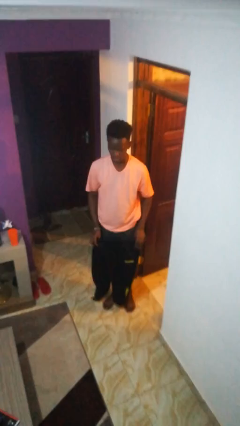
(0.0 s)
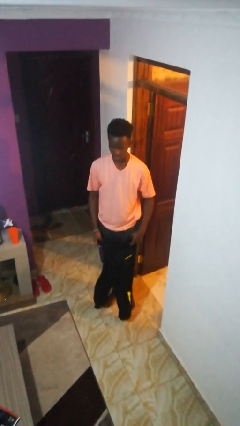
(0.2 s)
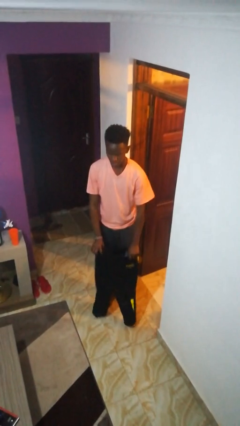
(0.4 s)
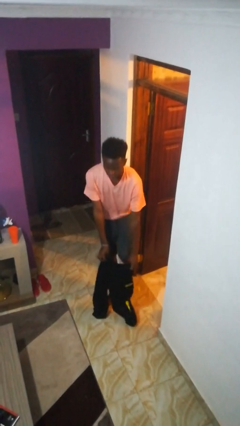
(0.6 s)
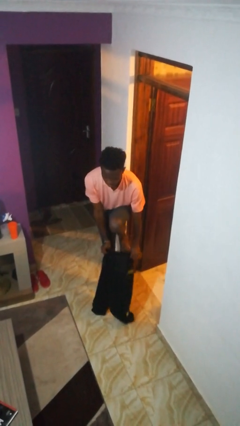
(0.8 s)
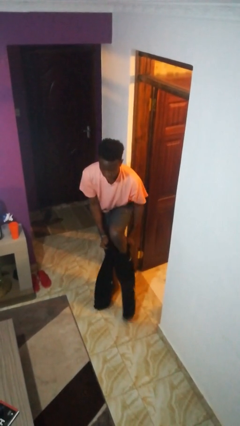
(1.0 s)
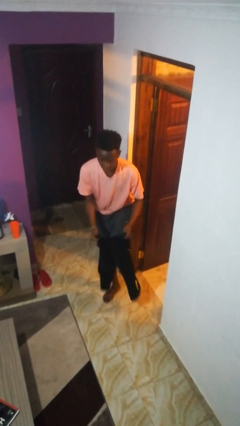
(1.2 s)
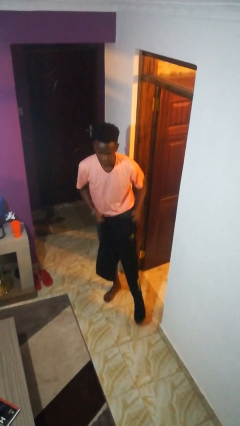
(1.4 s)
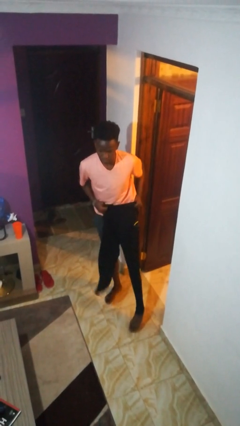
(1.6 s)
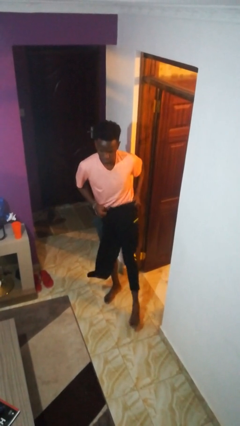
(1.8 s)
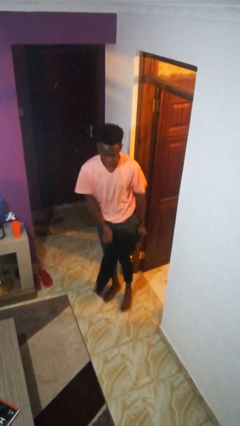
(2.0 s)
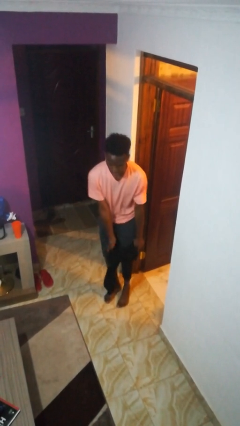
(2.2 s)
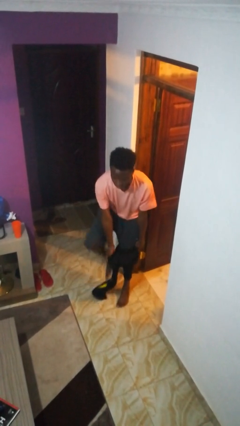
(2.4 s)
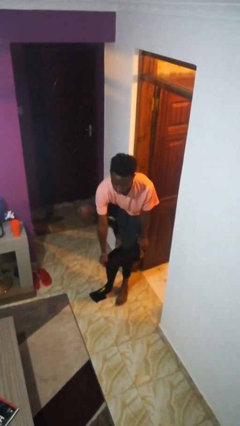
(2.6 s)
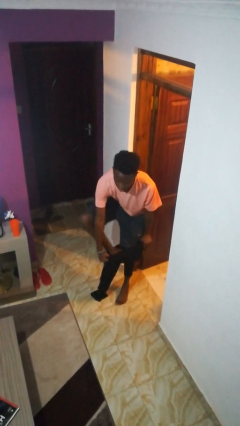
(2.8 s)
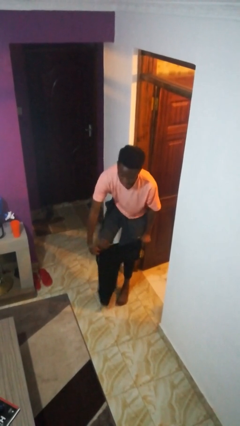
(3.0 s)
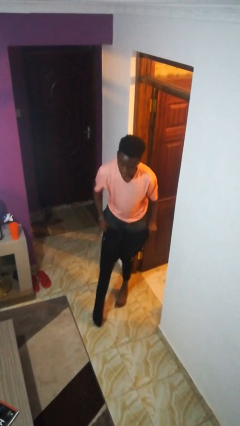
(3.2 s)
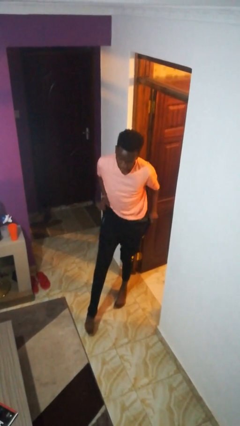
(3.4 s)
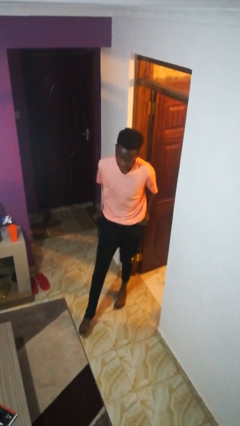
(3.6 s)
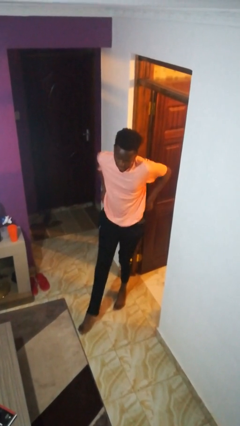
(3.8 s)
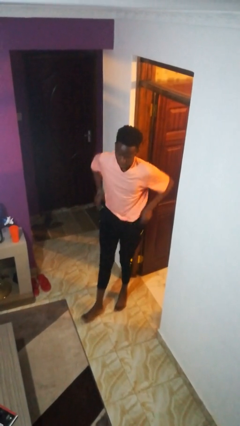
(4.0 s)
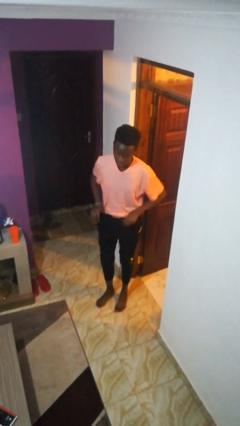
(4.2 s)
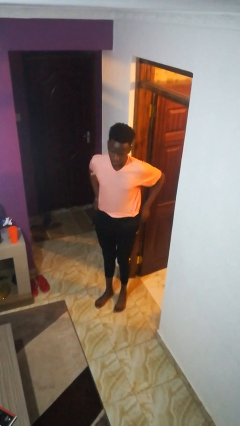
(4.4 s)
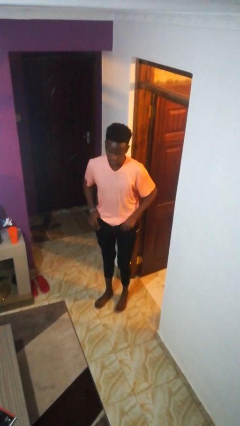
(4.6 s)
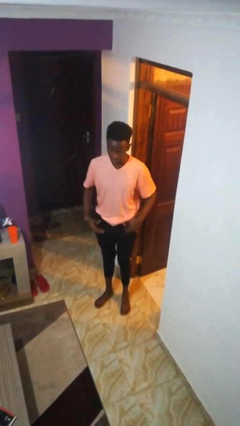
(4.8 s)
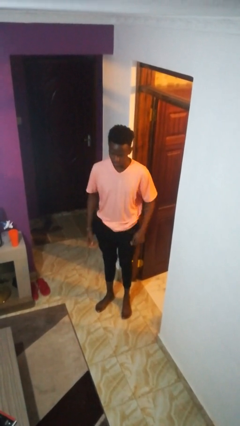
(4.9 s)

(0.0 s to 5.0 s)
person puts on pants

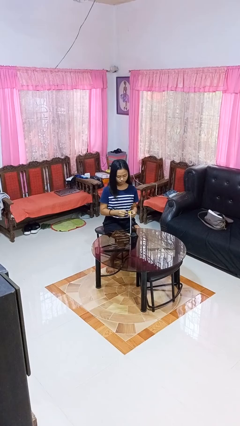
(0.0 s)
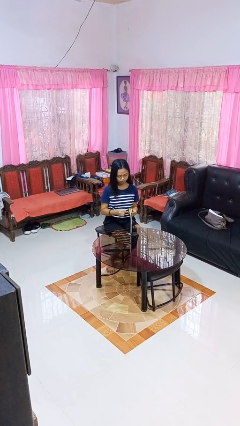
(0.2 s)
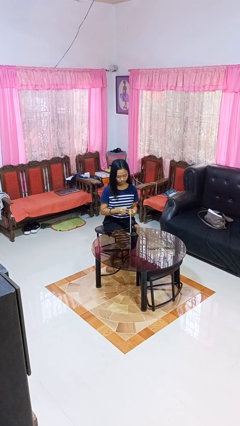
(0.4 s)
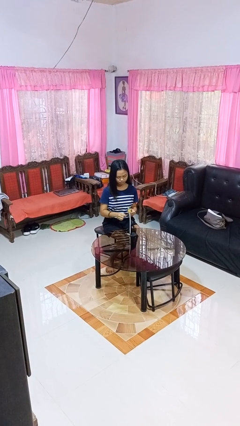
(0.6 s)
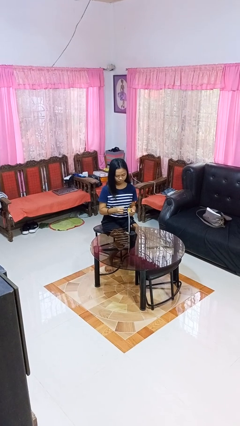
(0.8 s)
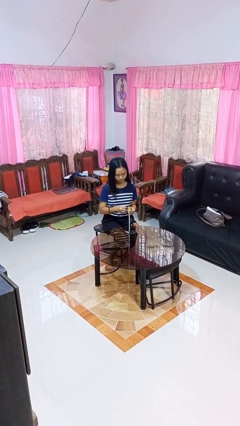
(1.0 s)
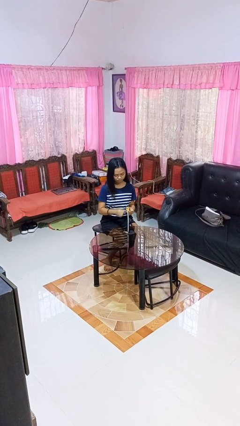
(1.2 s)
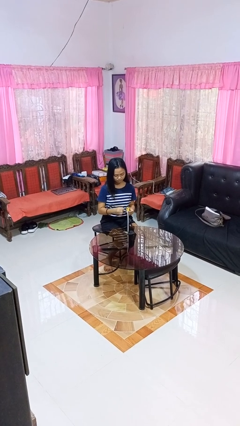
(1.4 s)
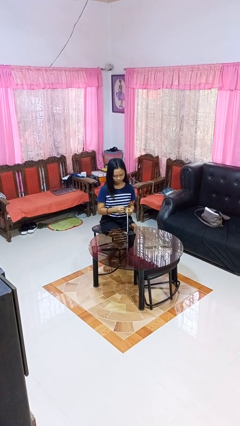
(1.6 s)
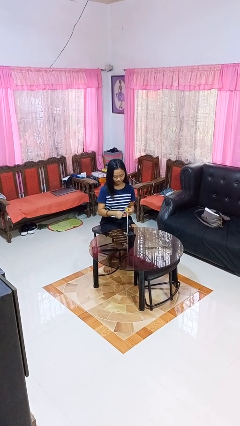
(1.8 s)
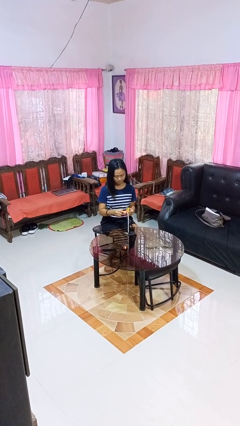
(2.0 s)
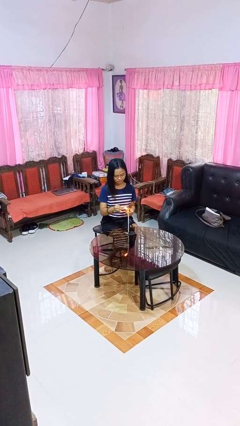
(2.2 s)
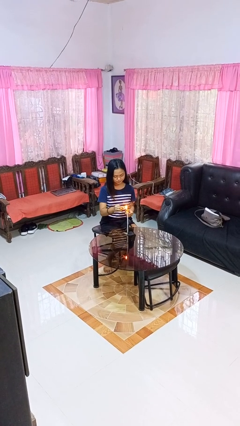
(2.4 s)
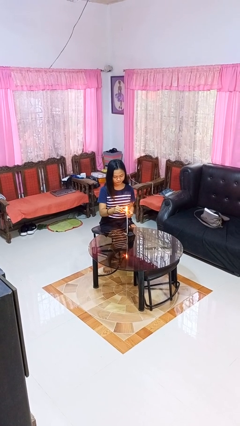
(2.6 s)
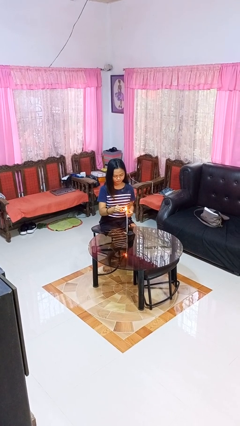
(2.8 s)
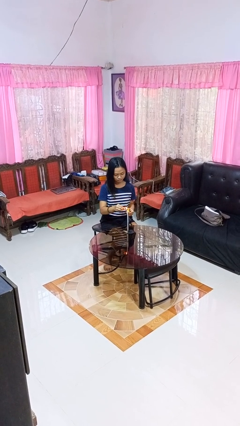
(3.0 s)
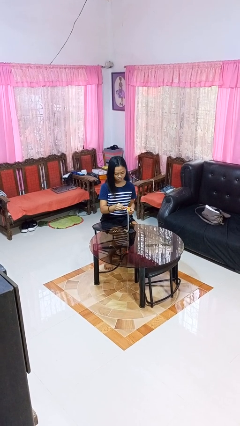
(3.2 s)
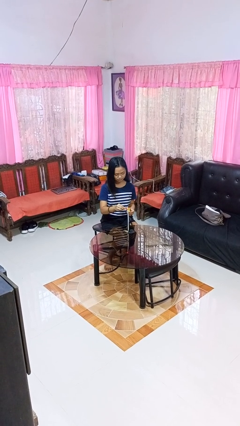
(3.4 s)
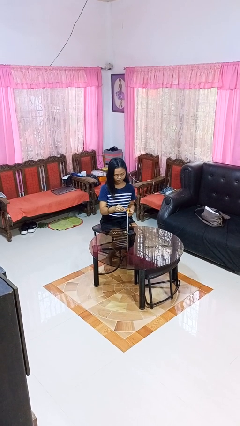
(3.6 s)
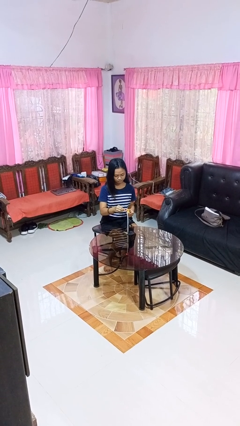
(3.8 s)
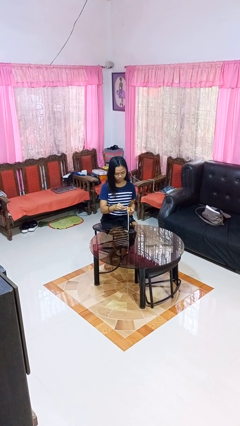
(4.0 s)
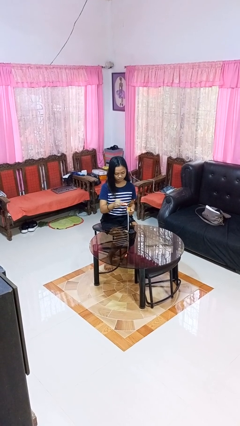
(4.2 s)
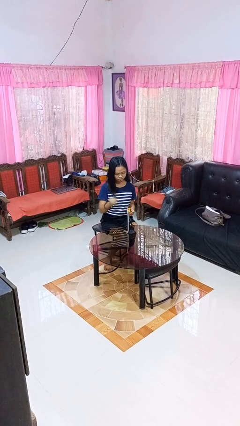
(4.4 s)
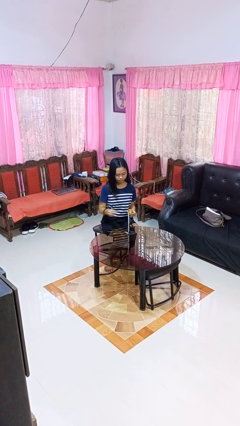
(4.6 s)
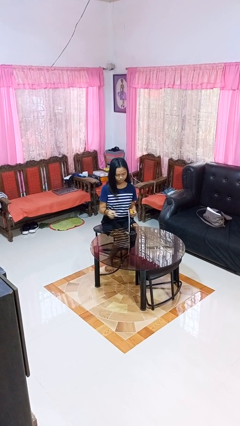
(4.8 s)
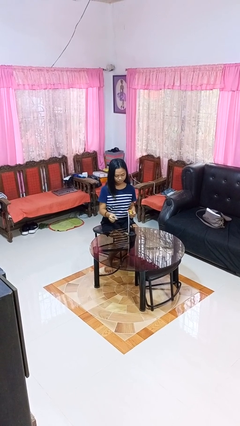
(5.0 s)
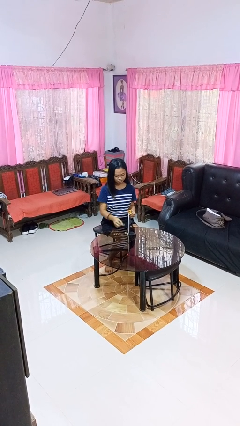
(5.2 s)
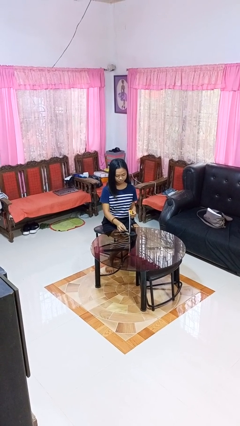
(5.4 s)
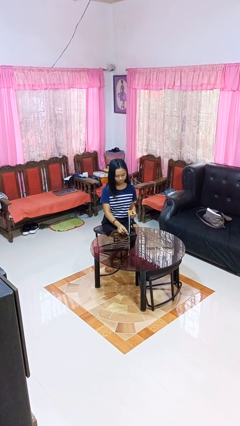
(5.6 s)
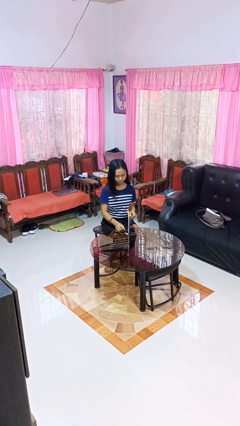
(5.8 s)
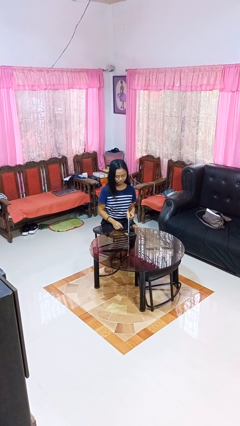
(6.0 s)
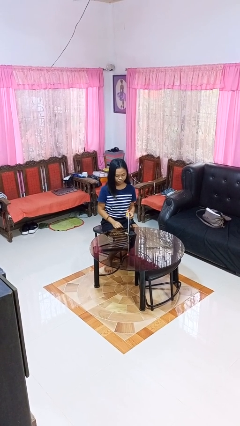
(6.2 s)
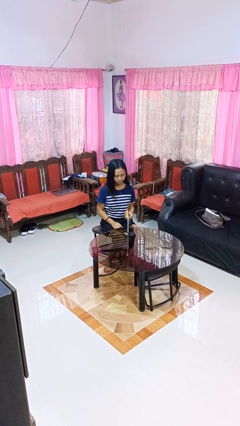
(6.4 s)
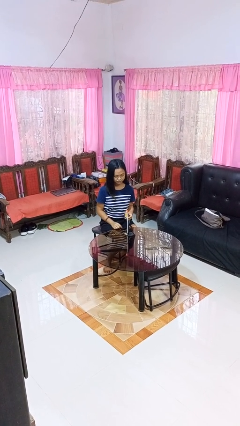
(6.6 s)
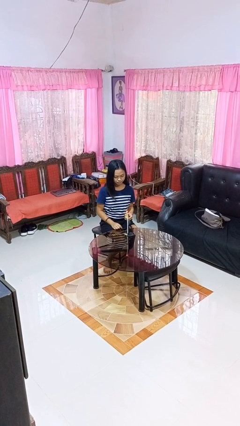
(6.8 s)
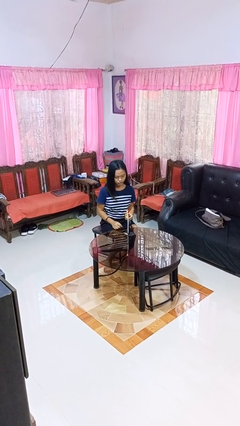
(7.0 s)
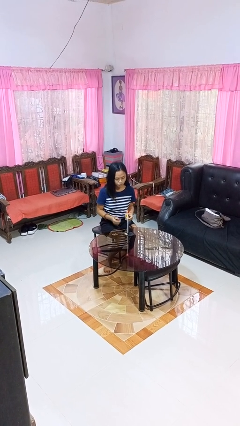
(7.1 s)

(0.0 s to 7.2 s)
person lights candle

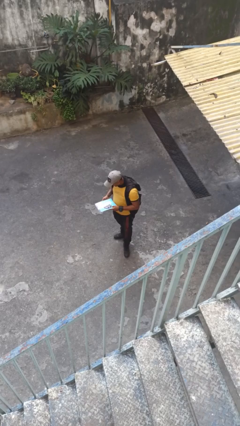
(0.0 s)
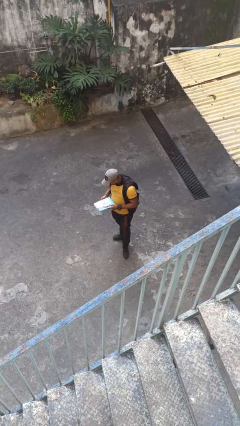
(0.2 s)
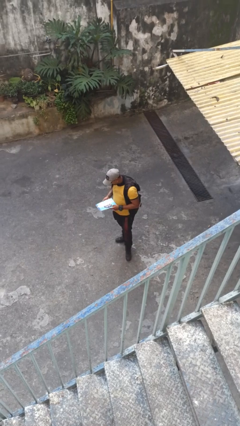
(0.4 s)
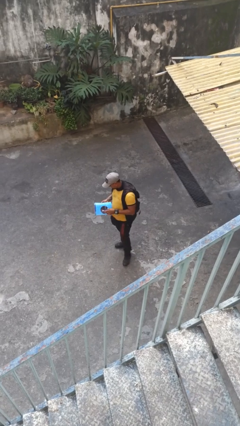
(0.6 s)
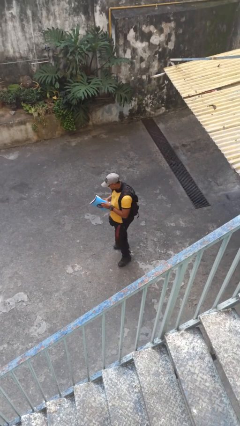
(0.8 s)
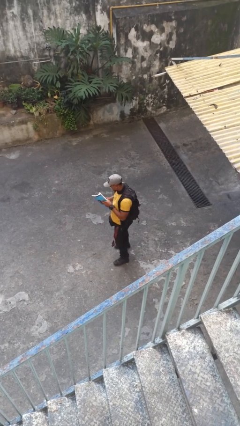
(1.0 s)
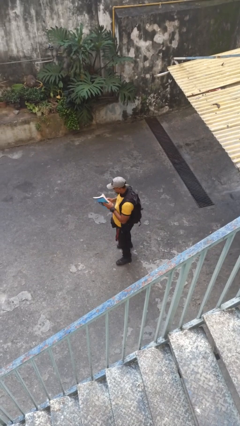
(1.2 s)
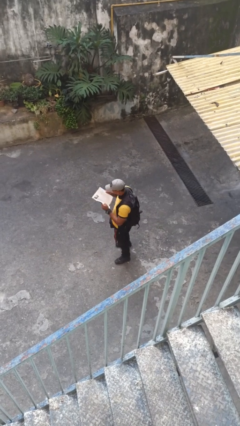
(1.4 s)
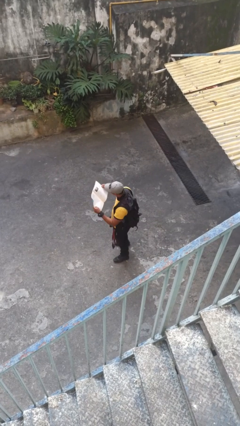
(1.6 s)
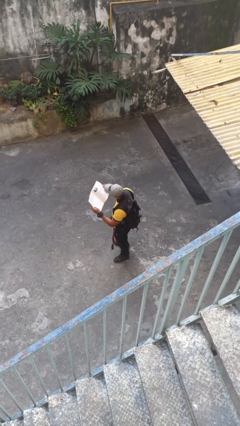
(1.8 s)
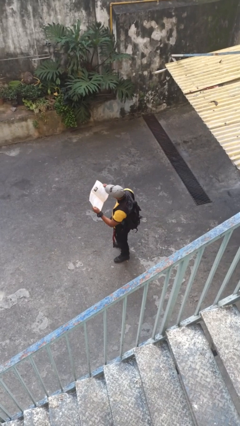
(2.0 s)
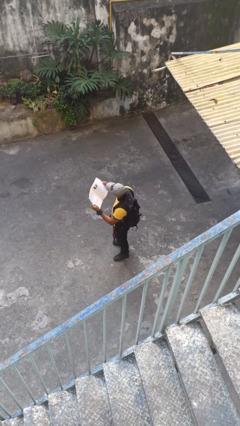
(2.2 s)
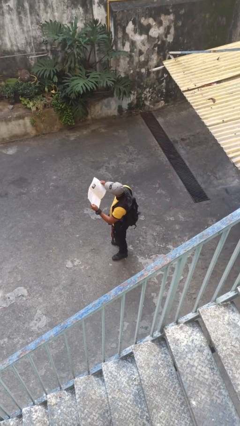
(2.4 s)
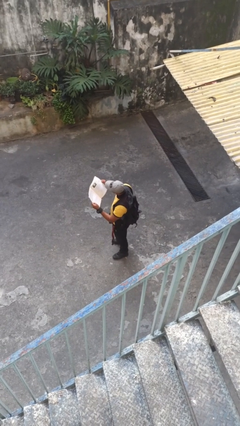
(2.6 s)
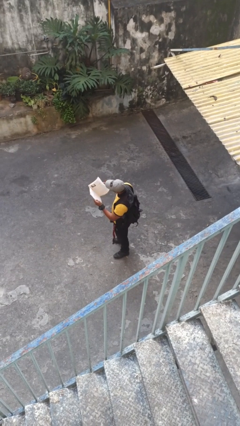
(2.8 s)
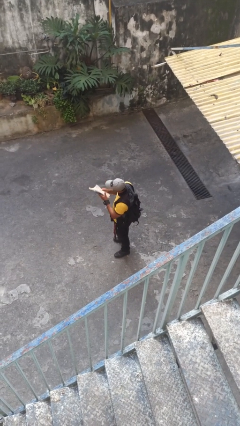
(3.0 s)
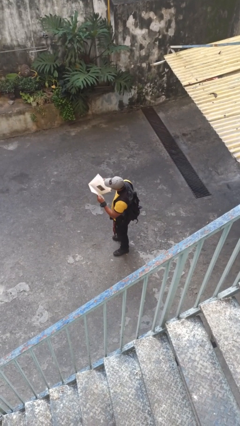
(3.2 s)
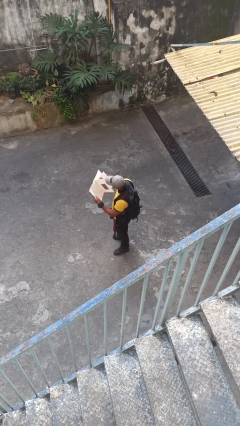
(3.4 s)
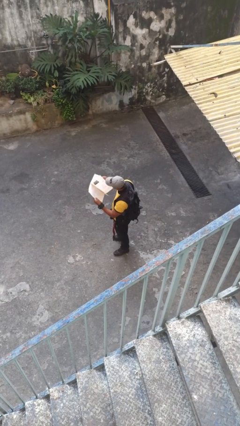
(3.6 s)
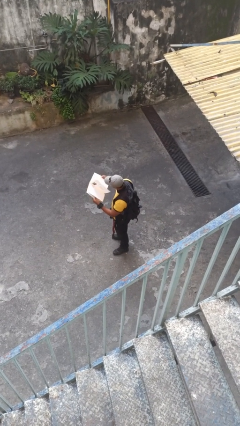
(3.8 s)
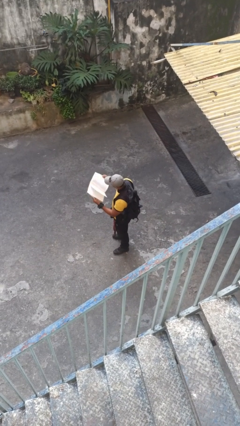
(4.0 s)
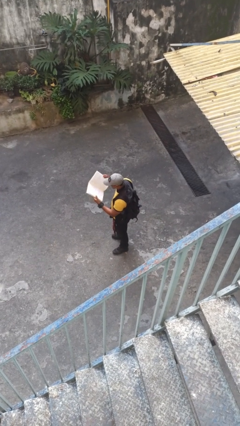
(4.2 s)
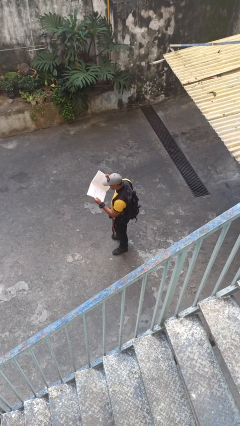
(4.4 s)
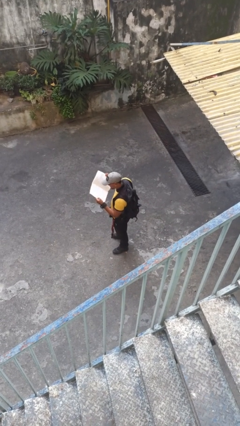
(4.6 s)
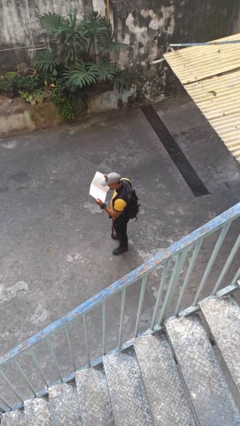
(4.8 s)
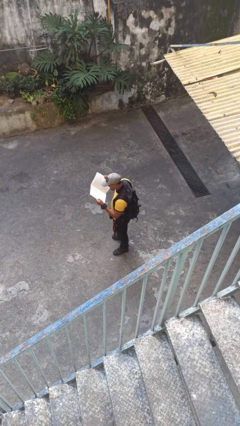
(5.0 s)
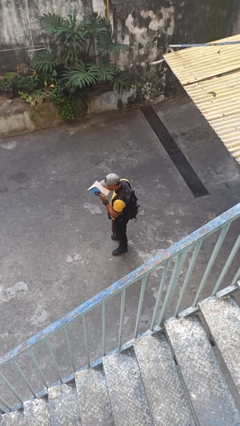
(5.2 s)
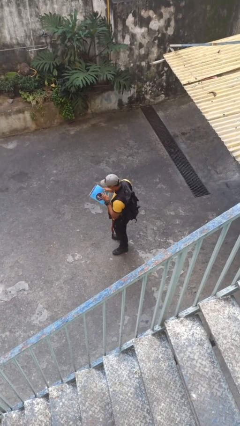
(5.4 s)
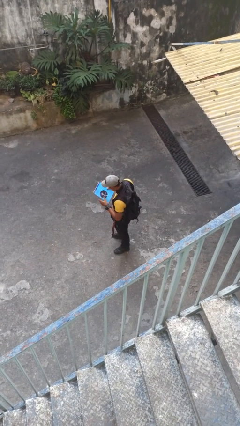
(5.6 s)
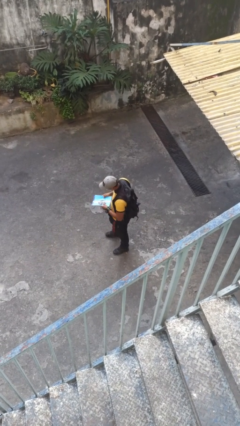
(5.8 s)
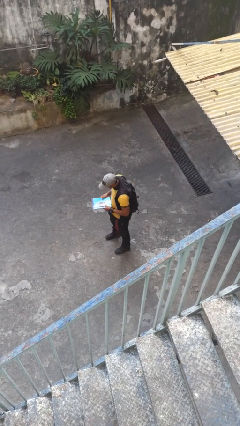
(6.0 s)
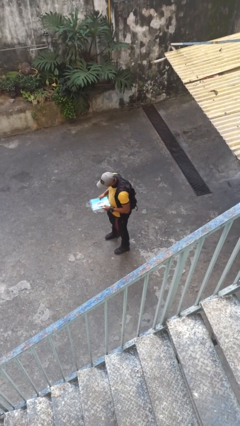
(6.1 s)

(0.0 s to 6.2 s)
person reads document
